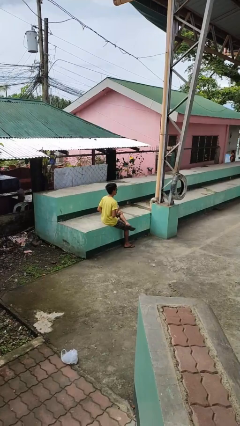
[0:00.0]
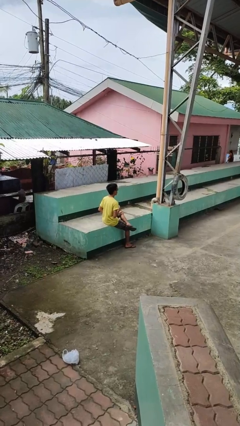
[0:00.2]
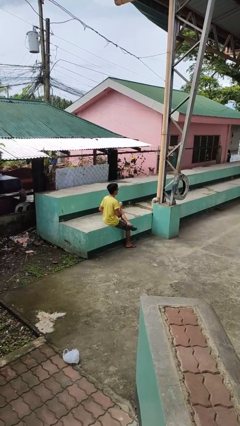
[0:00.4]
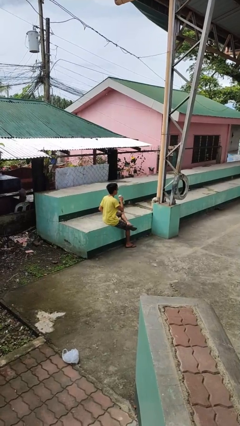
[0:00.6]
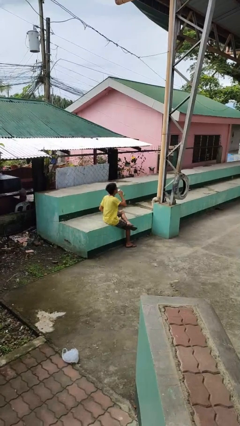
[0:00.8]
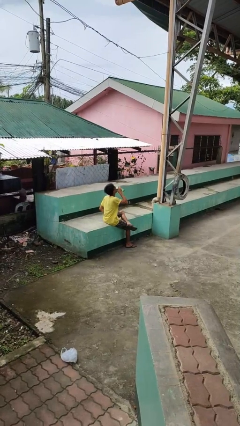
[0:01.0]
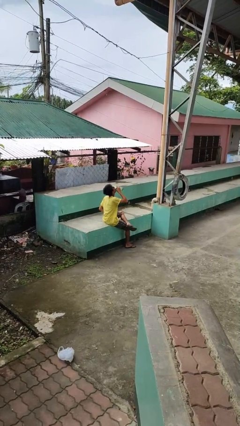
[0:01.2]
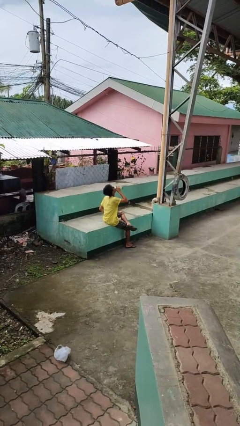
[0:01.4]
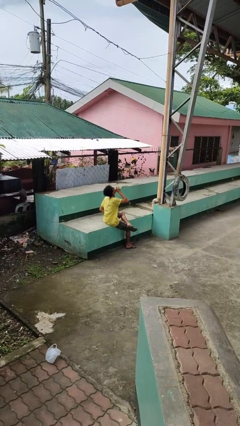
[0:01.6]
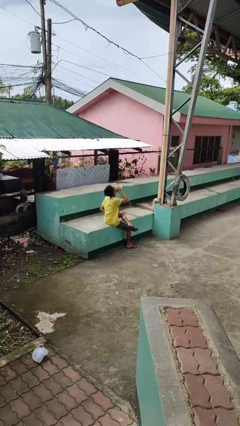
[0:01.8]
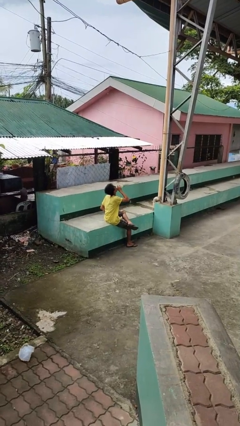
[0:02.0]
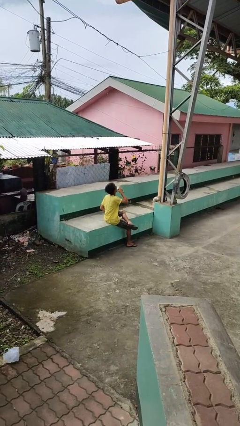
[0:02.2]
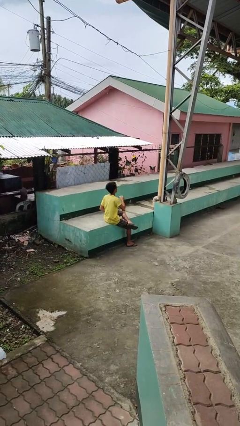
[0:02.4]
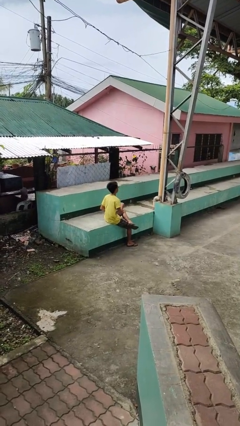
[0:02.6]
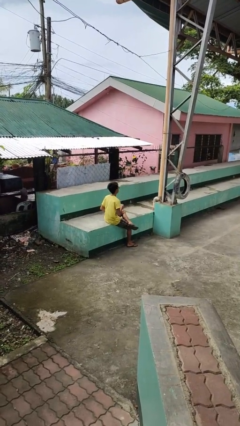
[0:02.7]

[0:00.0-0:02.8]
person drinks from bottle

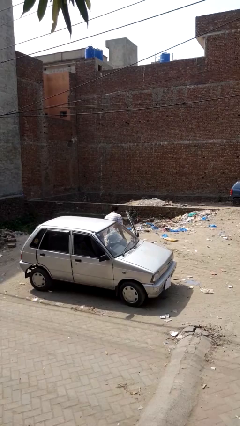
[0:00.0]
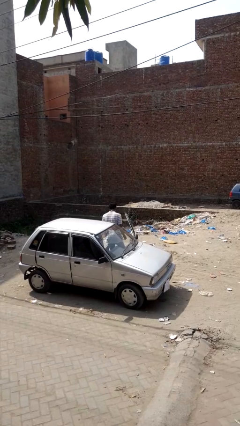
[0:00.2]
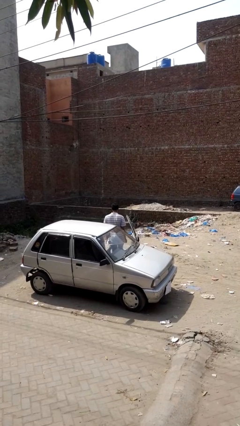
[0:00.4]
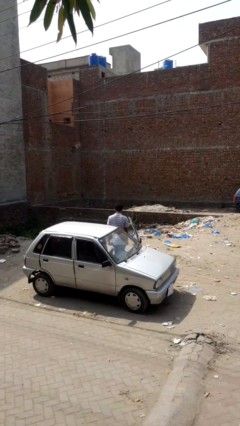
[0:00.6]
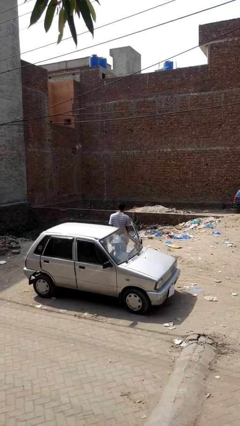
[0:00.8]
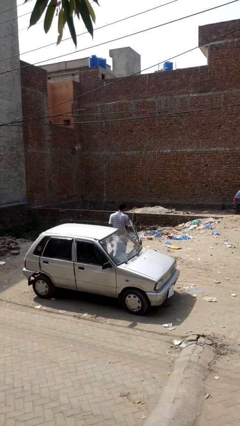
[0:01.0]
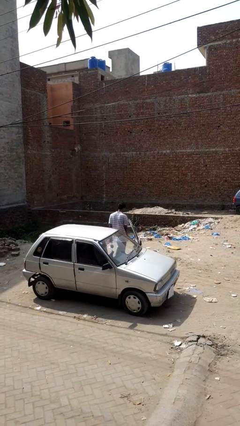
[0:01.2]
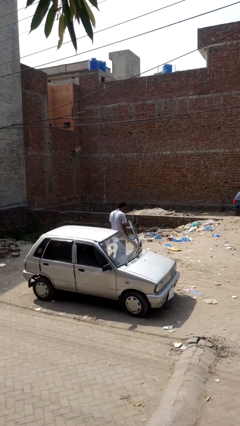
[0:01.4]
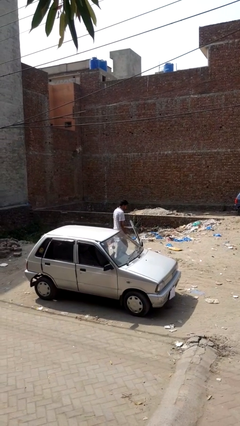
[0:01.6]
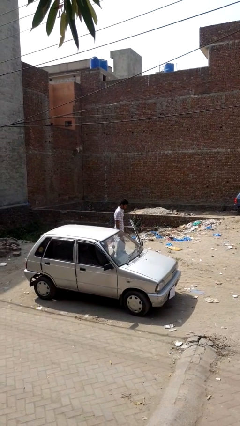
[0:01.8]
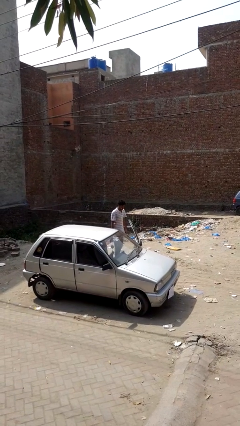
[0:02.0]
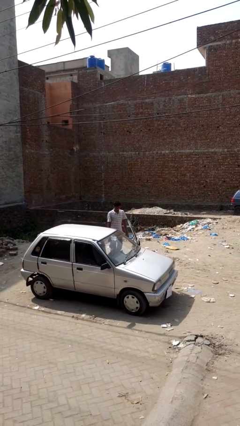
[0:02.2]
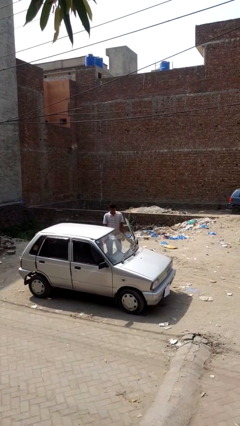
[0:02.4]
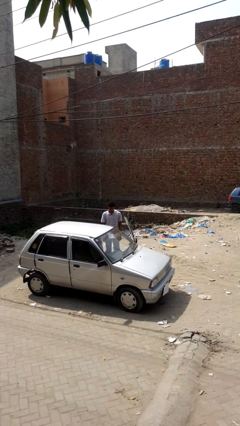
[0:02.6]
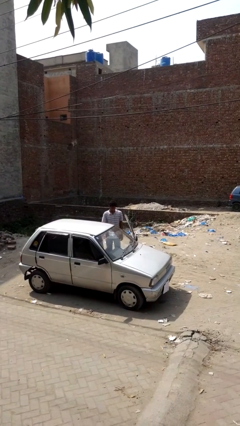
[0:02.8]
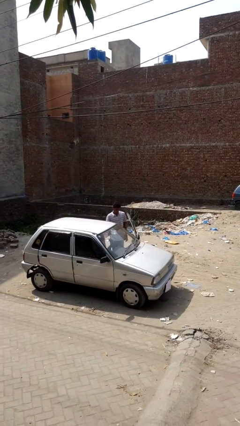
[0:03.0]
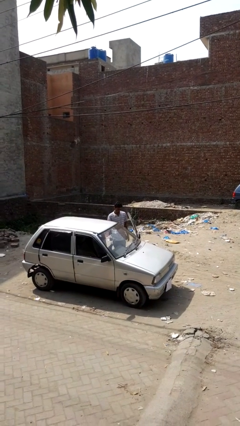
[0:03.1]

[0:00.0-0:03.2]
person exits car

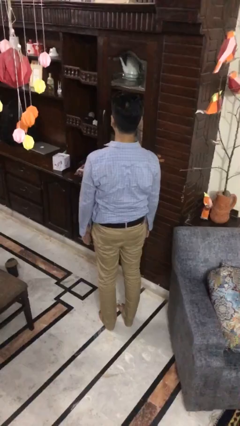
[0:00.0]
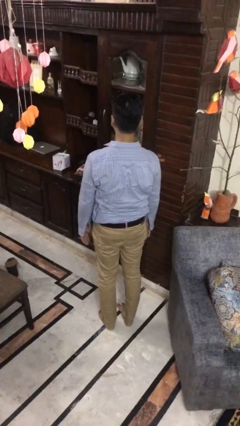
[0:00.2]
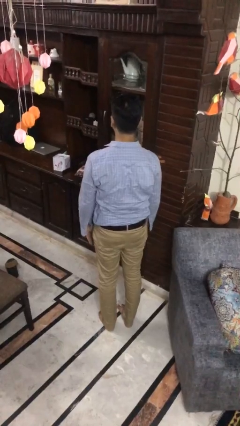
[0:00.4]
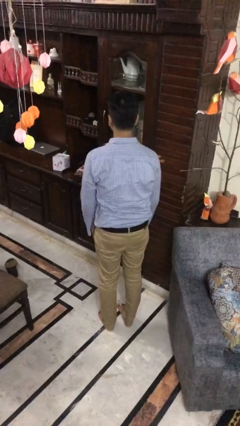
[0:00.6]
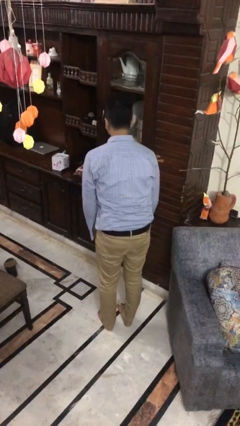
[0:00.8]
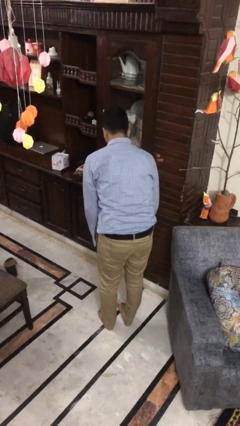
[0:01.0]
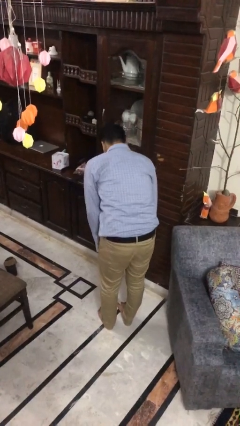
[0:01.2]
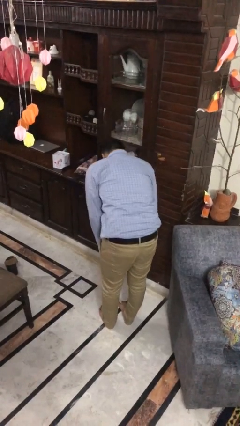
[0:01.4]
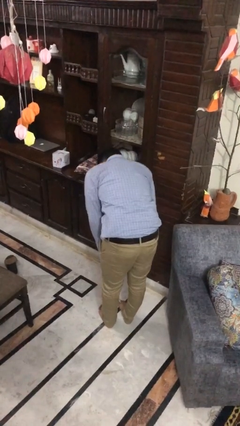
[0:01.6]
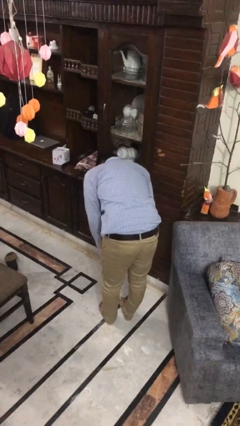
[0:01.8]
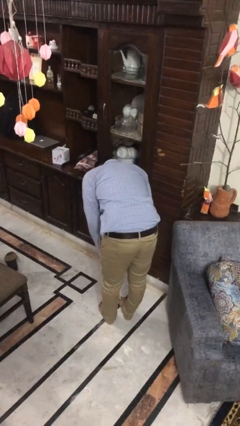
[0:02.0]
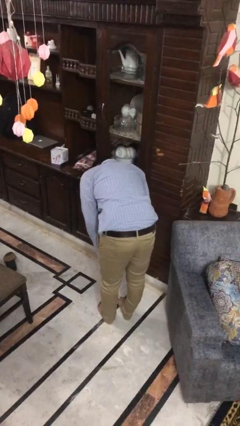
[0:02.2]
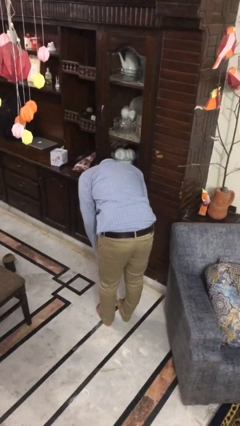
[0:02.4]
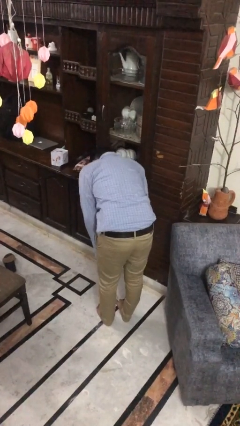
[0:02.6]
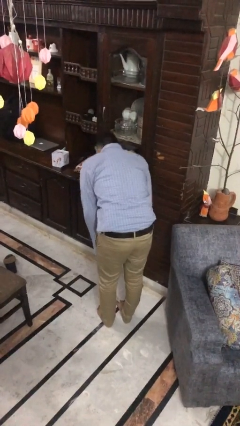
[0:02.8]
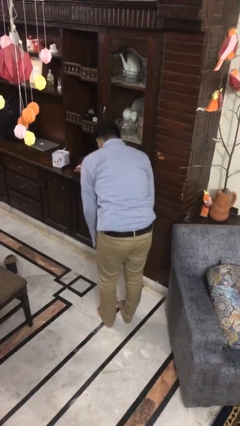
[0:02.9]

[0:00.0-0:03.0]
person bows

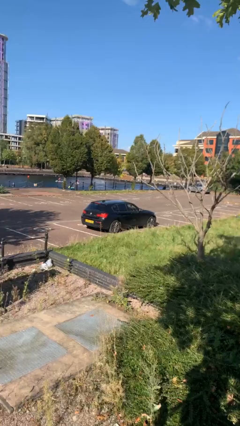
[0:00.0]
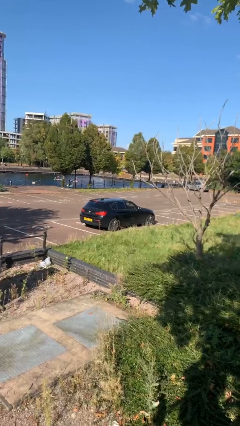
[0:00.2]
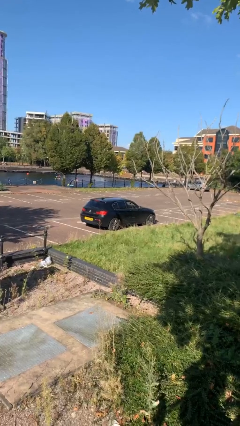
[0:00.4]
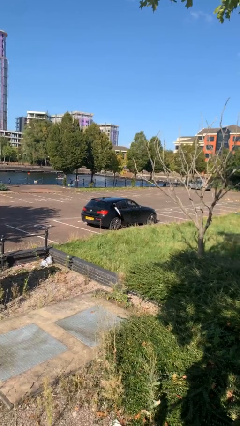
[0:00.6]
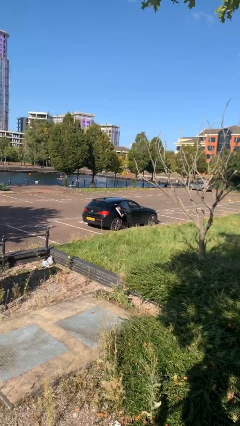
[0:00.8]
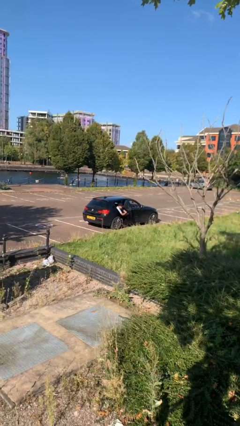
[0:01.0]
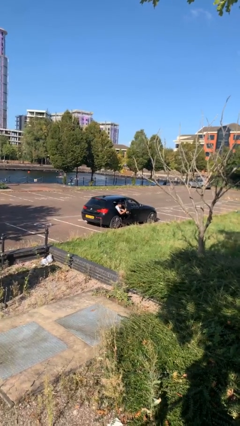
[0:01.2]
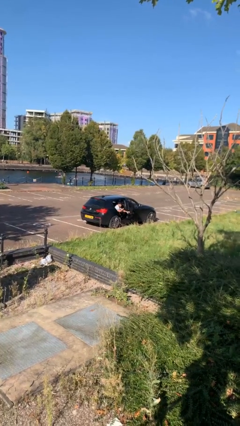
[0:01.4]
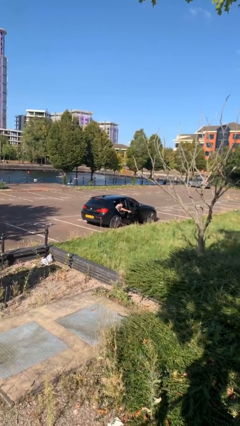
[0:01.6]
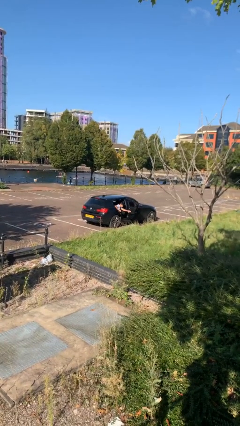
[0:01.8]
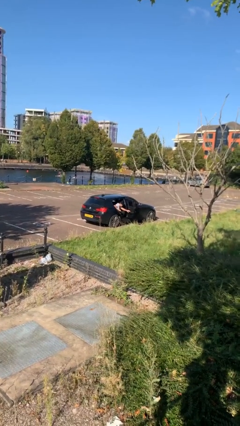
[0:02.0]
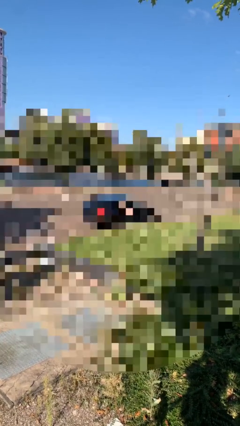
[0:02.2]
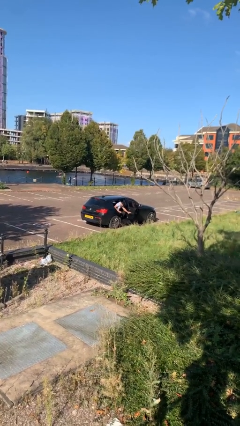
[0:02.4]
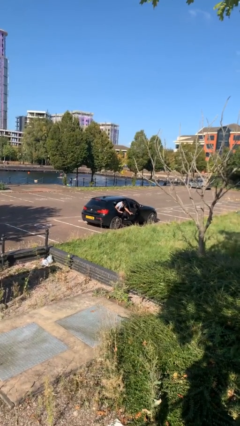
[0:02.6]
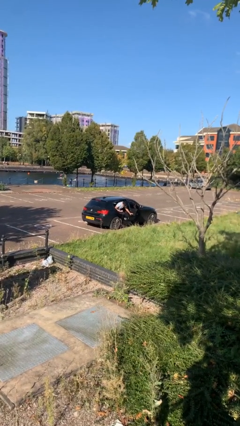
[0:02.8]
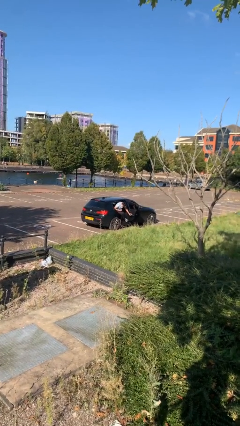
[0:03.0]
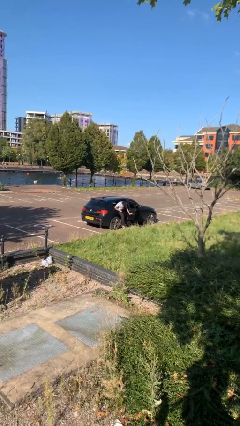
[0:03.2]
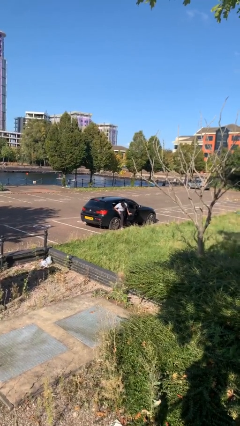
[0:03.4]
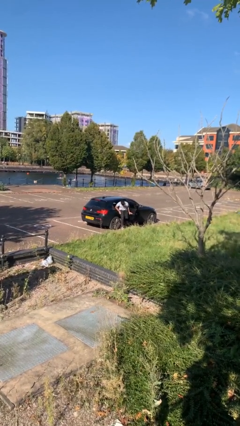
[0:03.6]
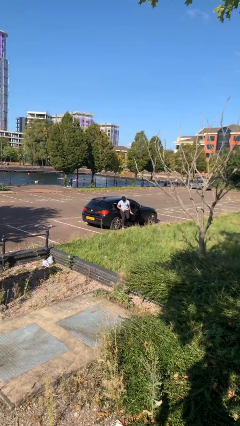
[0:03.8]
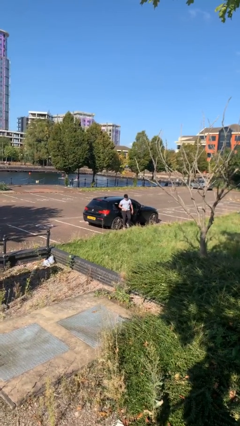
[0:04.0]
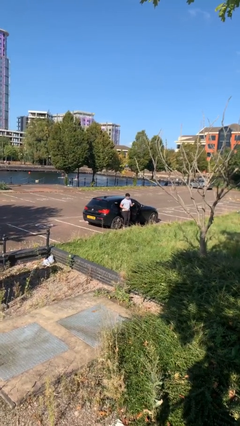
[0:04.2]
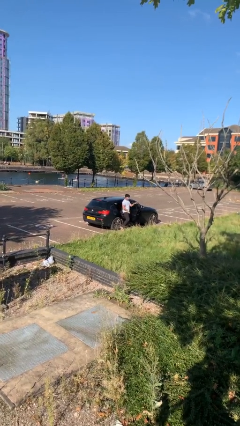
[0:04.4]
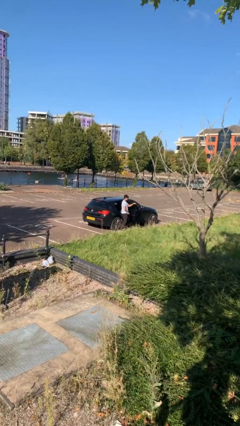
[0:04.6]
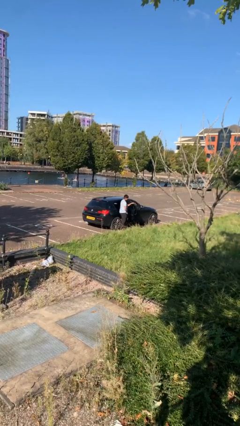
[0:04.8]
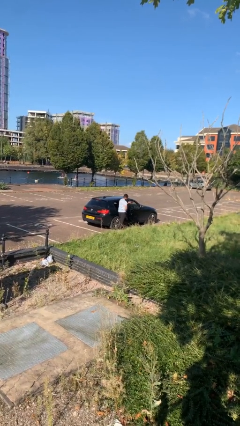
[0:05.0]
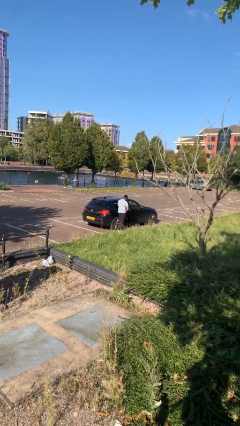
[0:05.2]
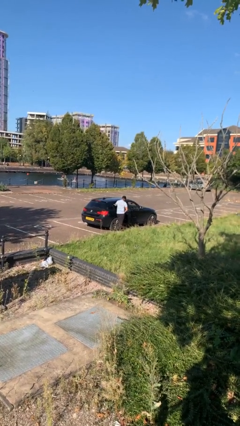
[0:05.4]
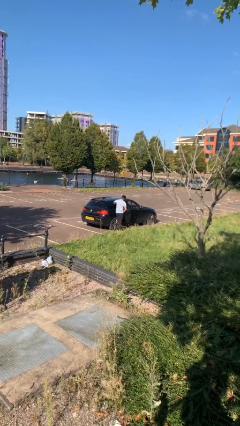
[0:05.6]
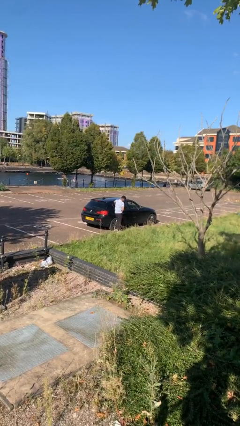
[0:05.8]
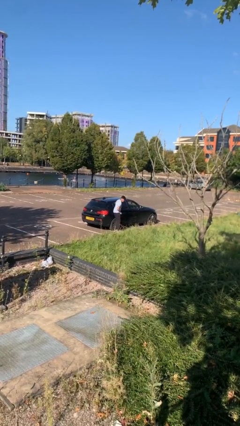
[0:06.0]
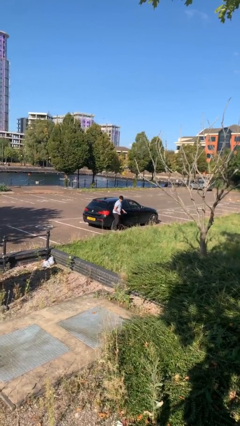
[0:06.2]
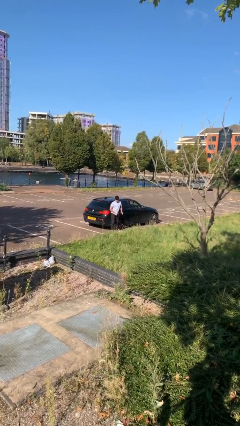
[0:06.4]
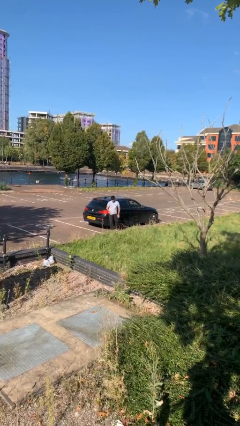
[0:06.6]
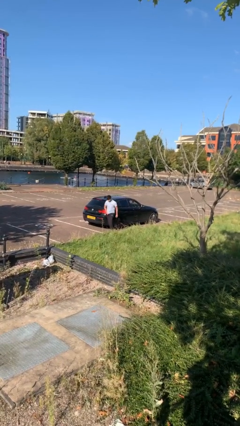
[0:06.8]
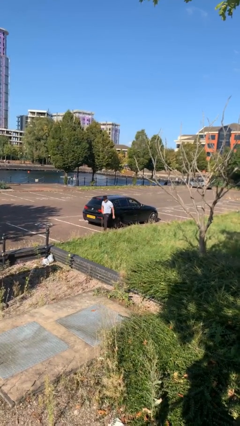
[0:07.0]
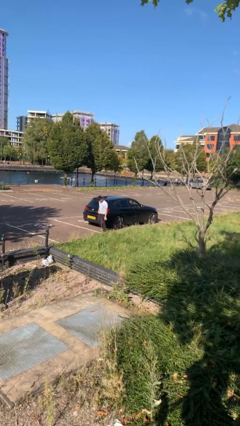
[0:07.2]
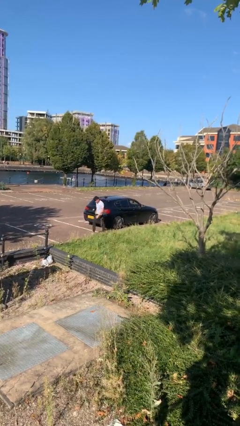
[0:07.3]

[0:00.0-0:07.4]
car drops off person

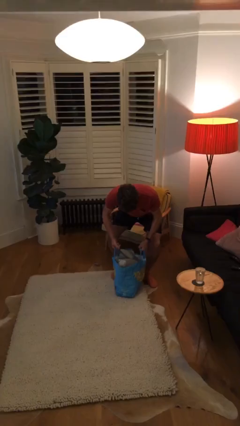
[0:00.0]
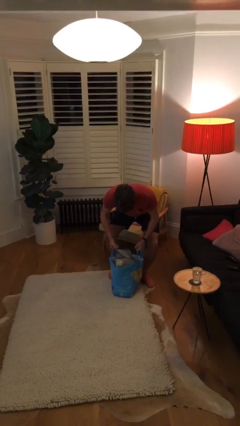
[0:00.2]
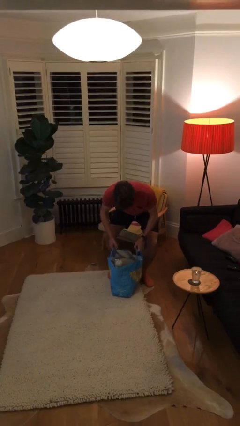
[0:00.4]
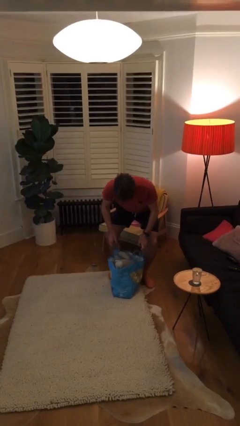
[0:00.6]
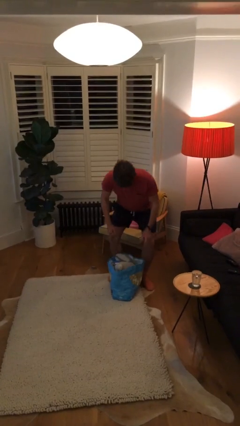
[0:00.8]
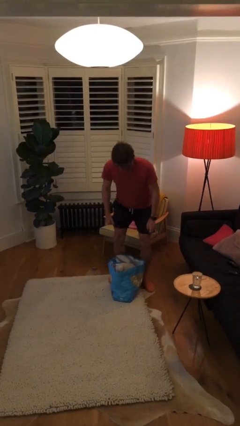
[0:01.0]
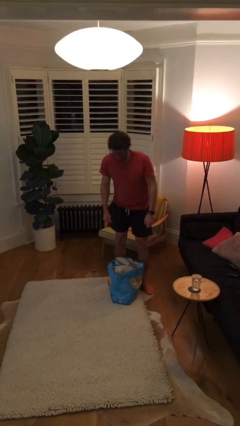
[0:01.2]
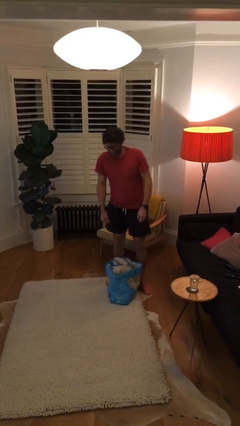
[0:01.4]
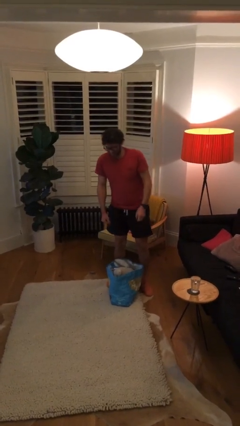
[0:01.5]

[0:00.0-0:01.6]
person puts down object on floor
